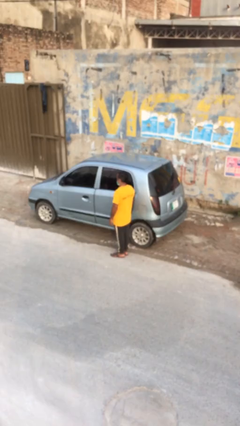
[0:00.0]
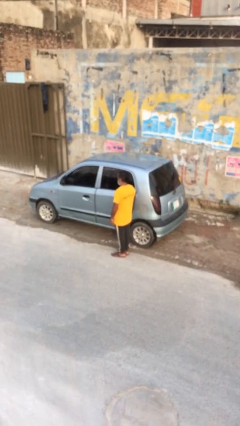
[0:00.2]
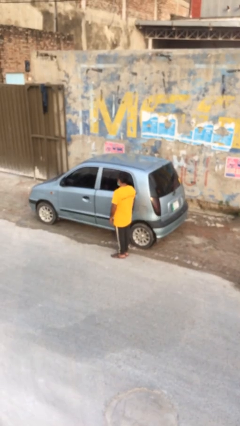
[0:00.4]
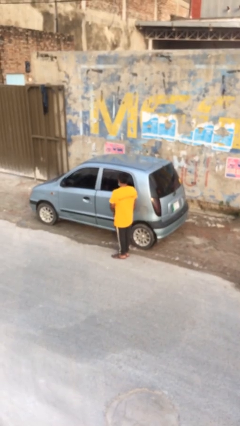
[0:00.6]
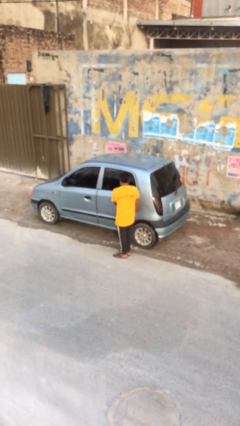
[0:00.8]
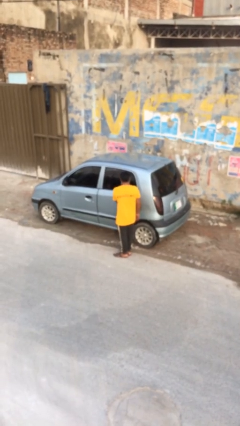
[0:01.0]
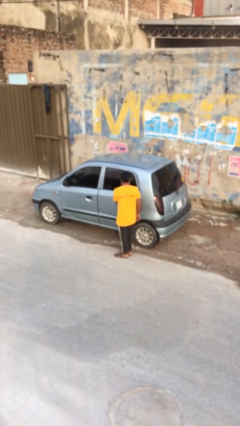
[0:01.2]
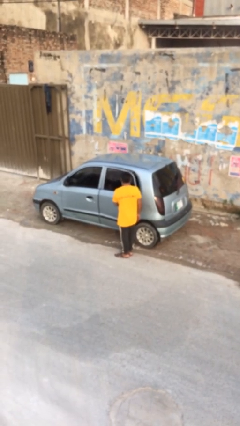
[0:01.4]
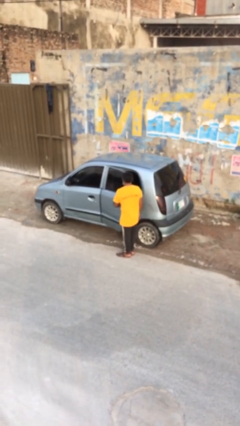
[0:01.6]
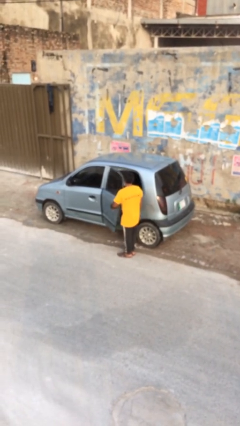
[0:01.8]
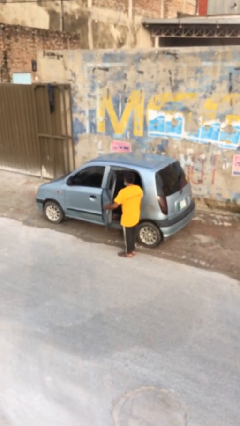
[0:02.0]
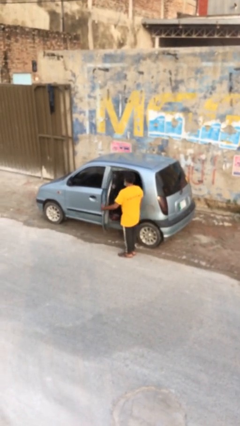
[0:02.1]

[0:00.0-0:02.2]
person opens car door

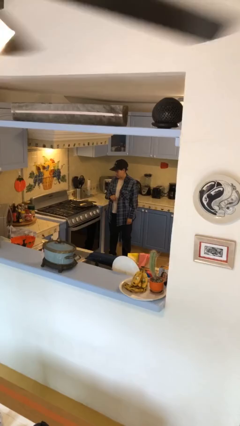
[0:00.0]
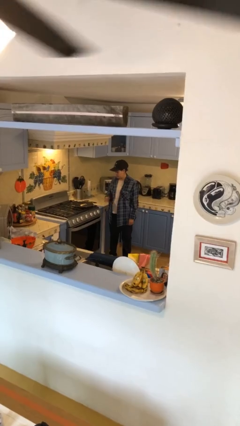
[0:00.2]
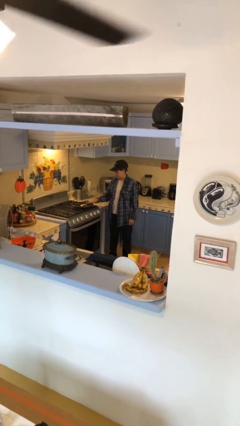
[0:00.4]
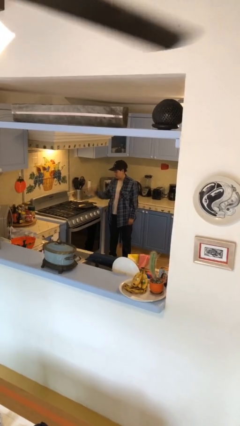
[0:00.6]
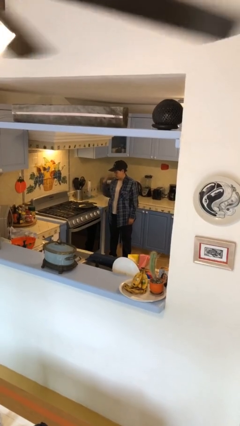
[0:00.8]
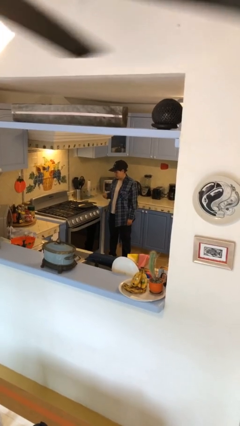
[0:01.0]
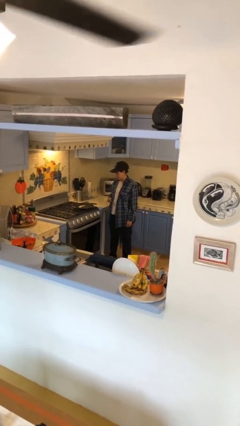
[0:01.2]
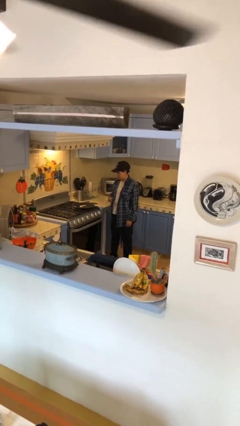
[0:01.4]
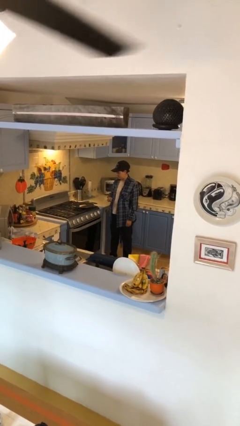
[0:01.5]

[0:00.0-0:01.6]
person burns hand

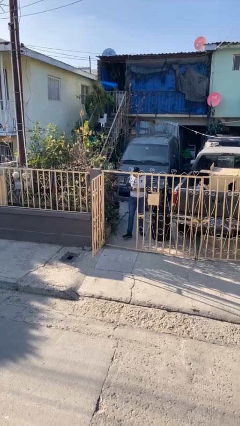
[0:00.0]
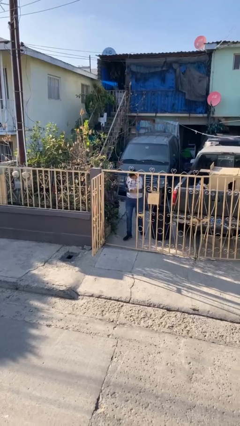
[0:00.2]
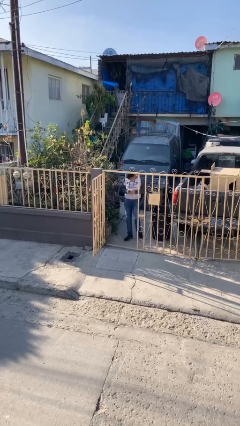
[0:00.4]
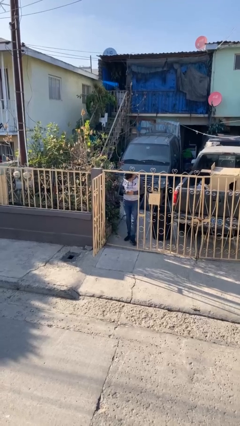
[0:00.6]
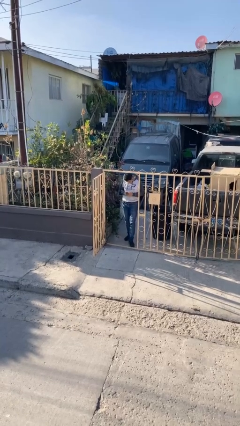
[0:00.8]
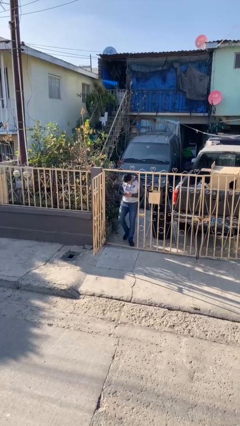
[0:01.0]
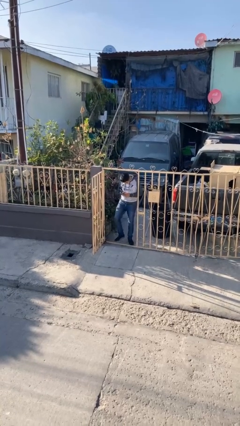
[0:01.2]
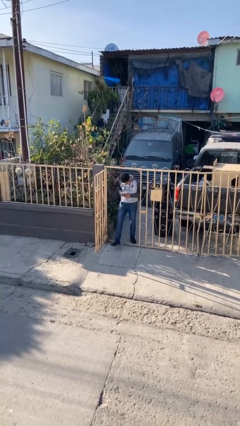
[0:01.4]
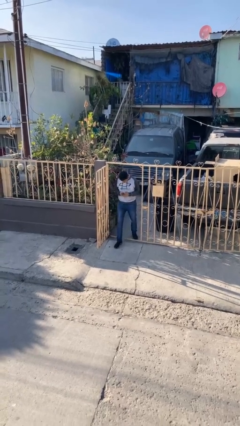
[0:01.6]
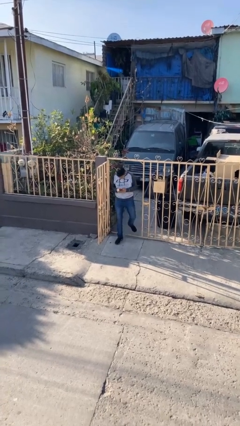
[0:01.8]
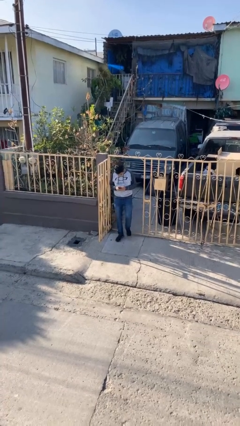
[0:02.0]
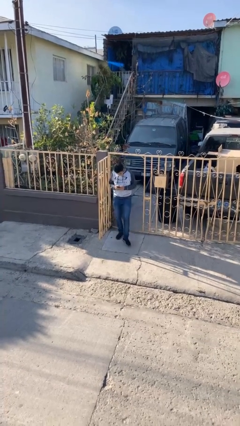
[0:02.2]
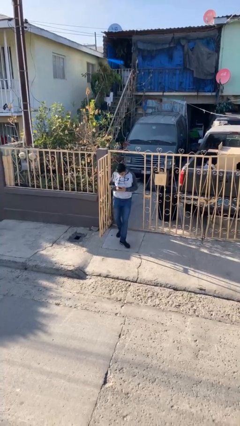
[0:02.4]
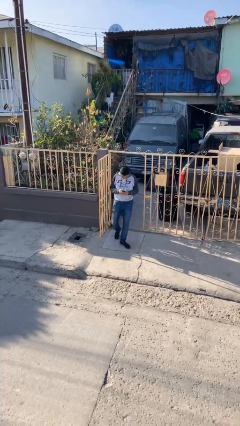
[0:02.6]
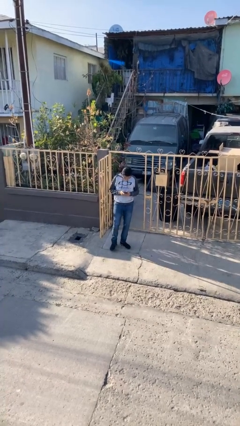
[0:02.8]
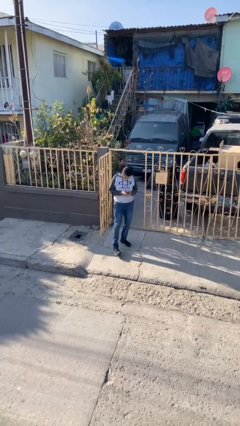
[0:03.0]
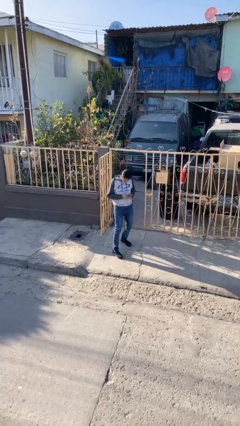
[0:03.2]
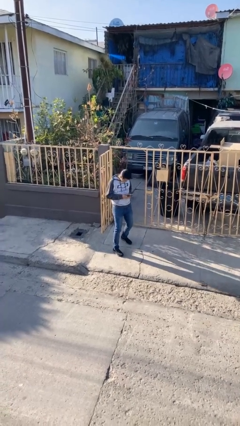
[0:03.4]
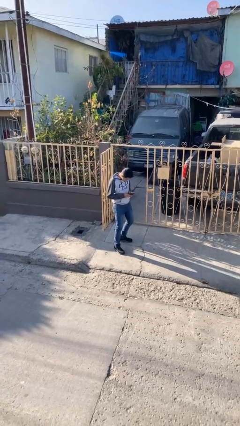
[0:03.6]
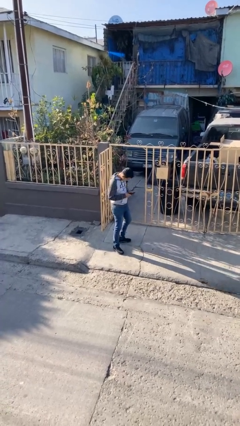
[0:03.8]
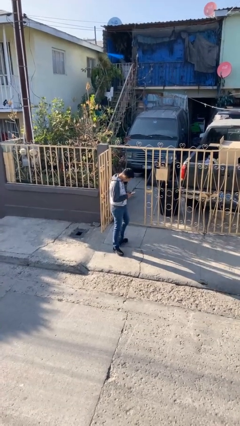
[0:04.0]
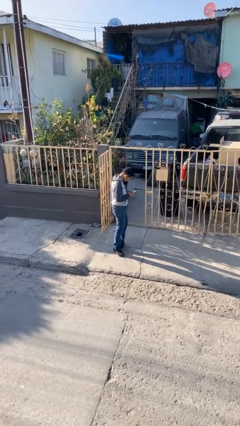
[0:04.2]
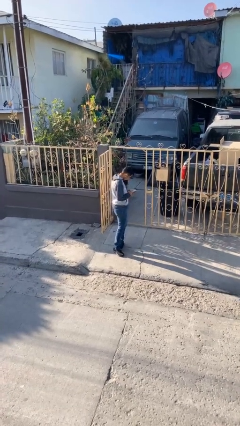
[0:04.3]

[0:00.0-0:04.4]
person enters scene through structure

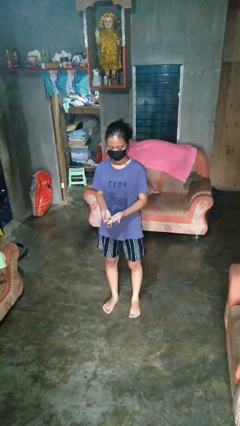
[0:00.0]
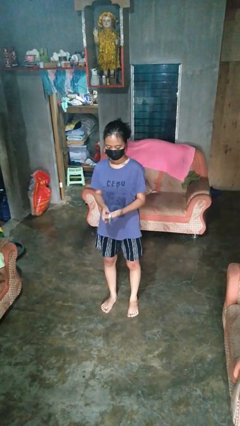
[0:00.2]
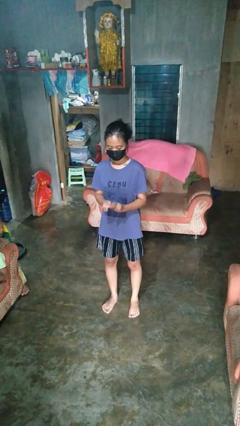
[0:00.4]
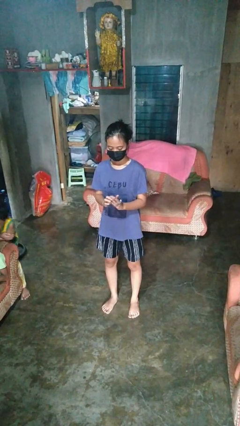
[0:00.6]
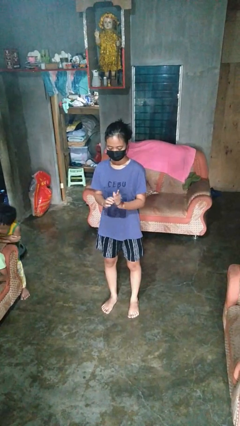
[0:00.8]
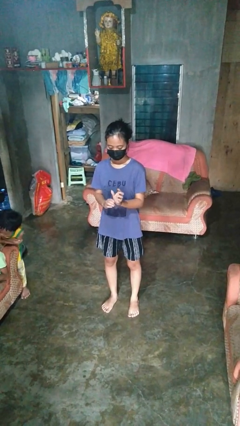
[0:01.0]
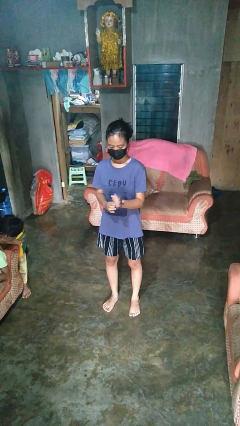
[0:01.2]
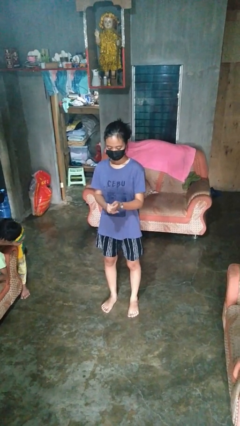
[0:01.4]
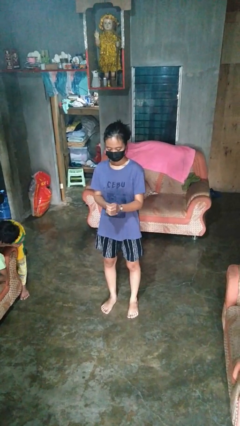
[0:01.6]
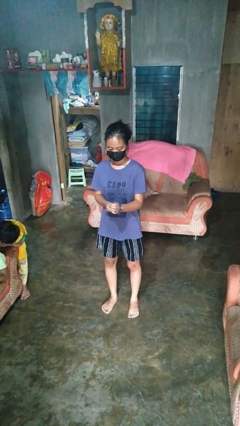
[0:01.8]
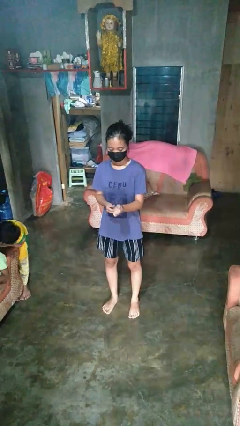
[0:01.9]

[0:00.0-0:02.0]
person puts on wristwatch

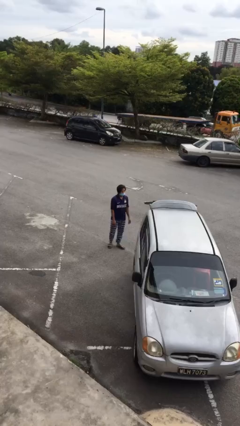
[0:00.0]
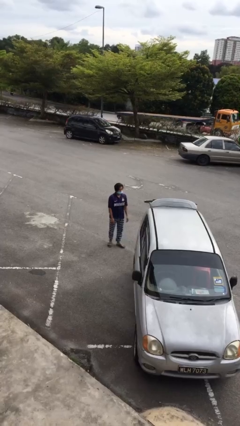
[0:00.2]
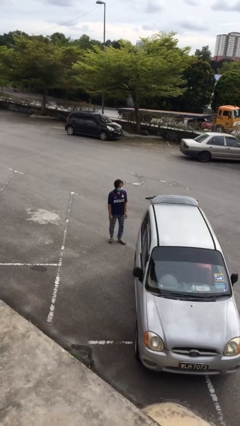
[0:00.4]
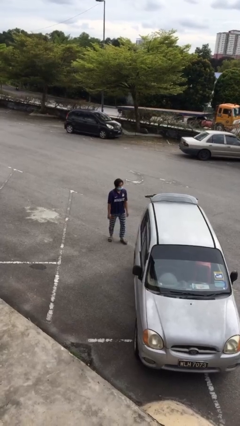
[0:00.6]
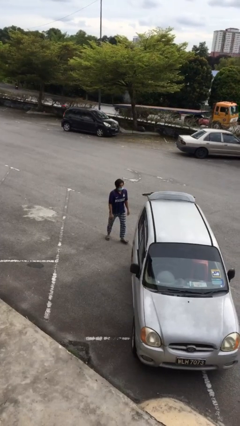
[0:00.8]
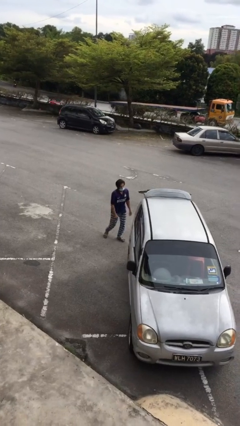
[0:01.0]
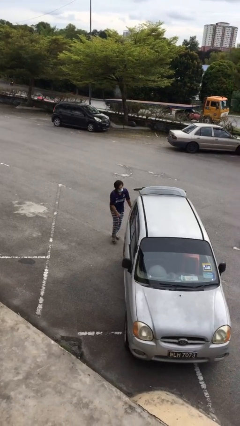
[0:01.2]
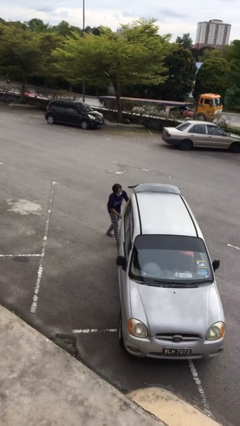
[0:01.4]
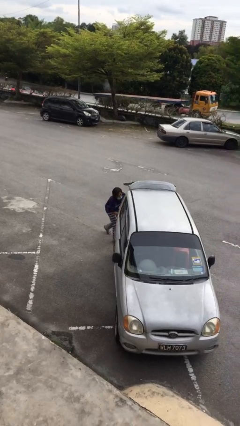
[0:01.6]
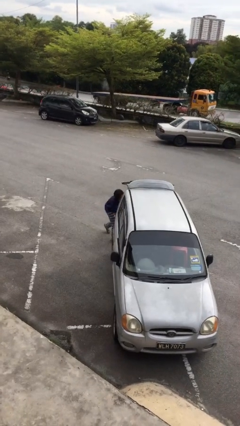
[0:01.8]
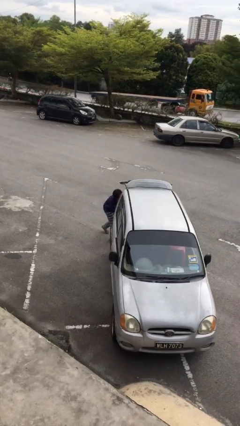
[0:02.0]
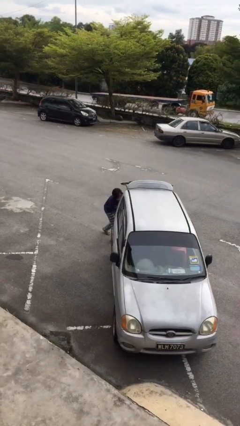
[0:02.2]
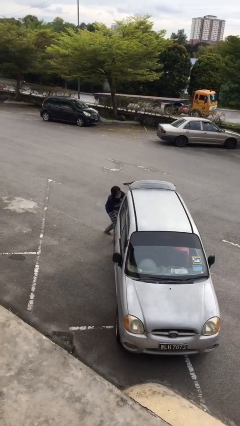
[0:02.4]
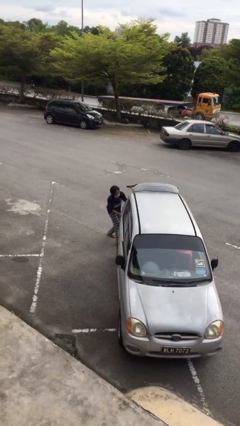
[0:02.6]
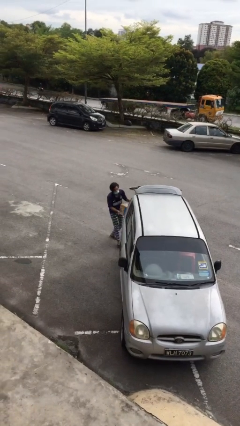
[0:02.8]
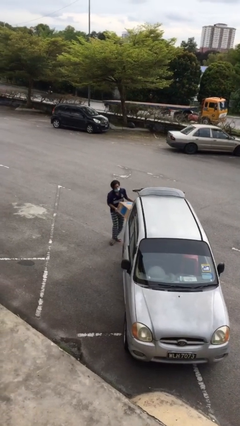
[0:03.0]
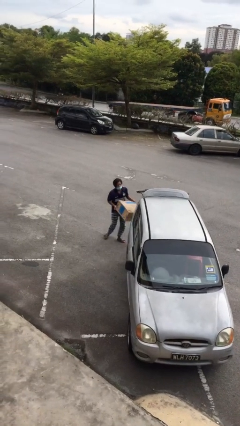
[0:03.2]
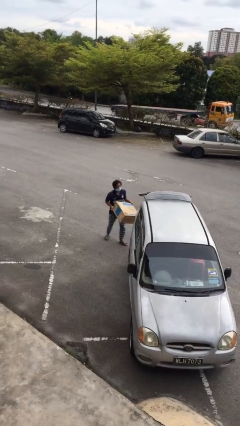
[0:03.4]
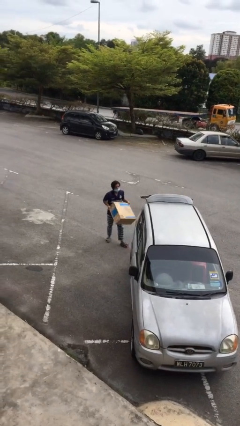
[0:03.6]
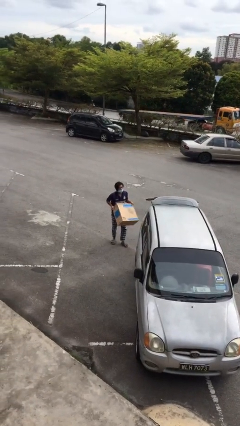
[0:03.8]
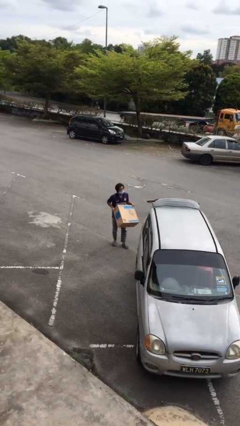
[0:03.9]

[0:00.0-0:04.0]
person unloads car

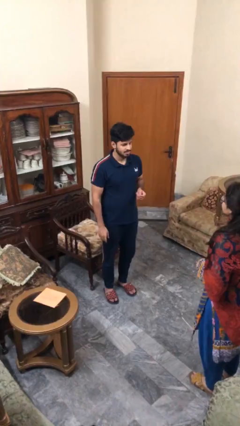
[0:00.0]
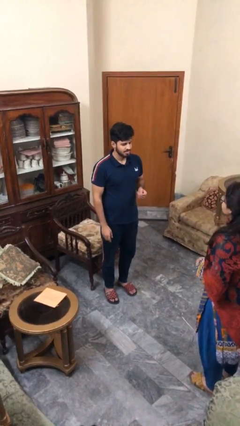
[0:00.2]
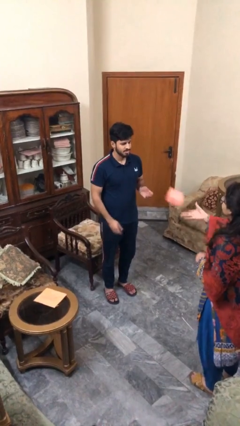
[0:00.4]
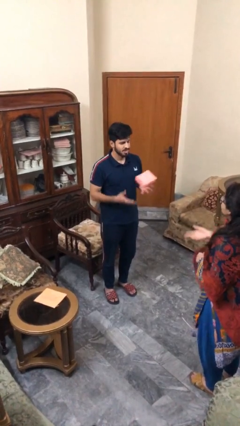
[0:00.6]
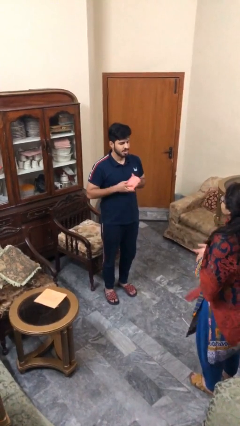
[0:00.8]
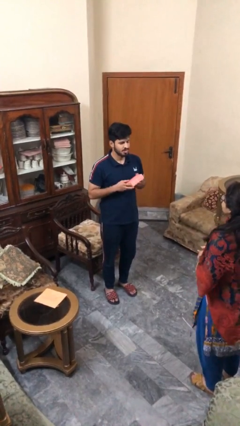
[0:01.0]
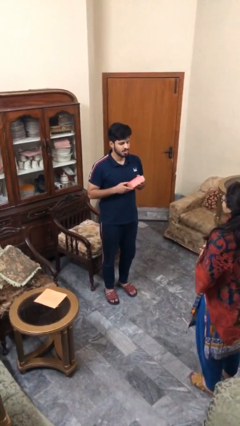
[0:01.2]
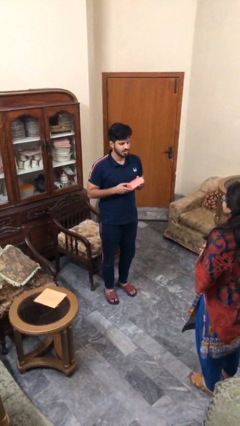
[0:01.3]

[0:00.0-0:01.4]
person catches object from person

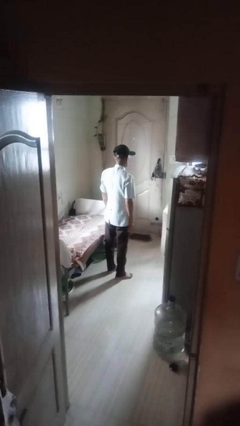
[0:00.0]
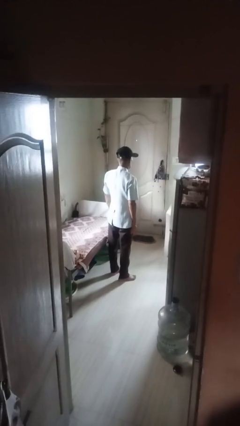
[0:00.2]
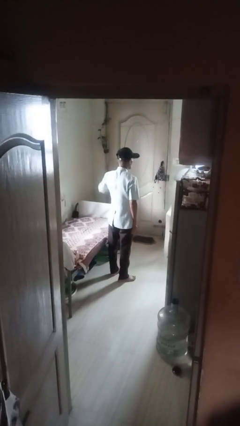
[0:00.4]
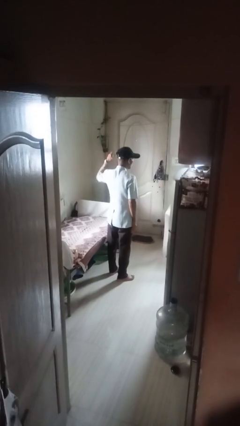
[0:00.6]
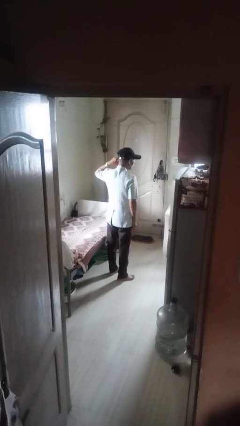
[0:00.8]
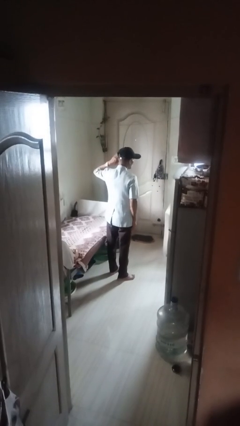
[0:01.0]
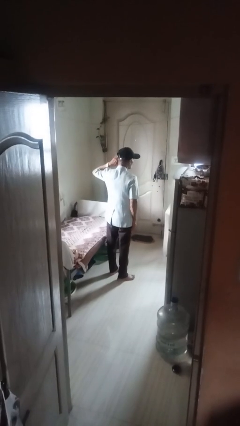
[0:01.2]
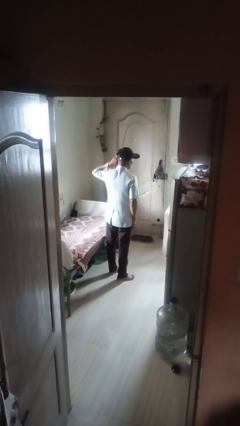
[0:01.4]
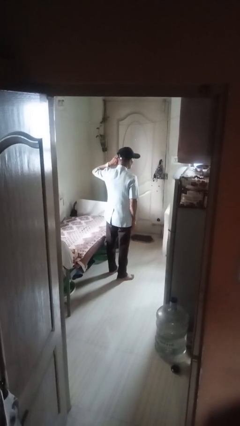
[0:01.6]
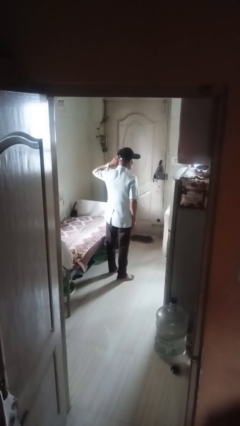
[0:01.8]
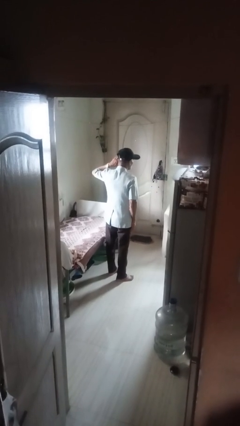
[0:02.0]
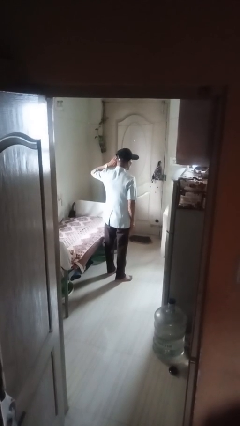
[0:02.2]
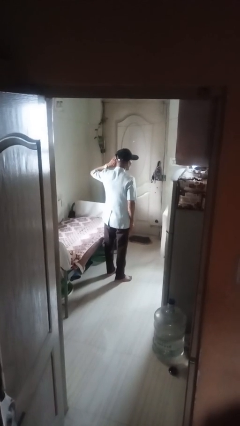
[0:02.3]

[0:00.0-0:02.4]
person gestures listen closely
